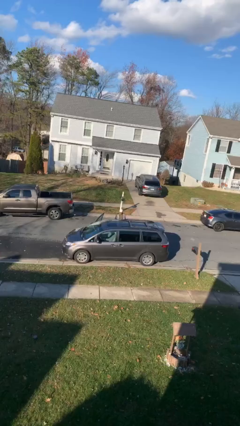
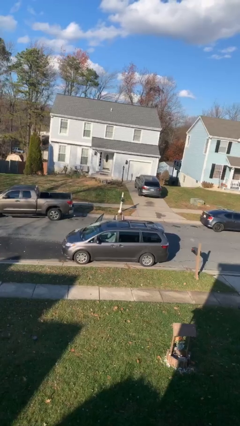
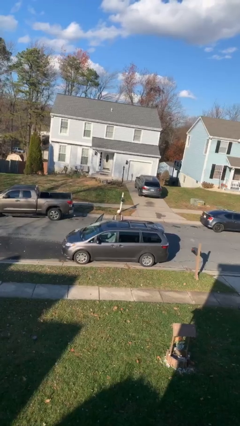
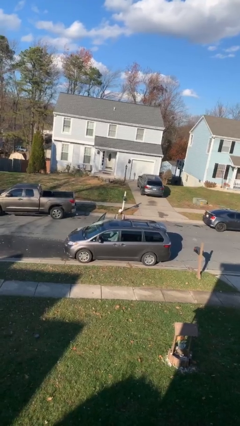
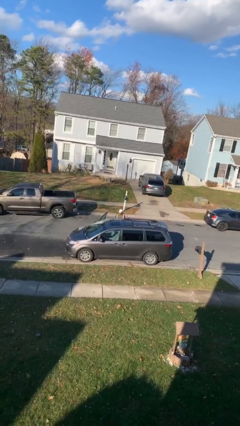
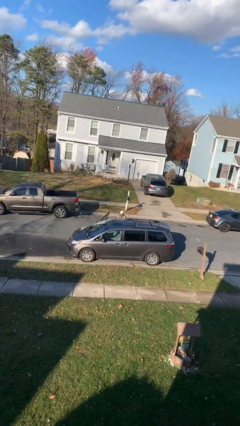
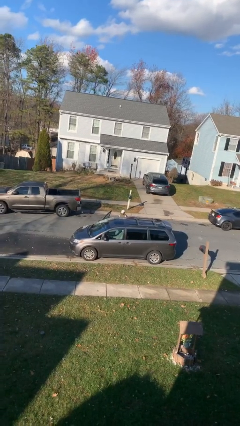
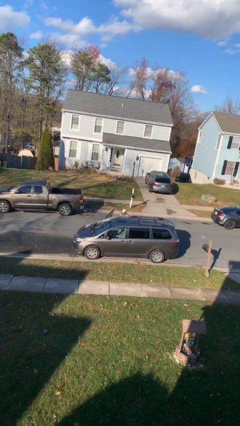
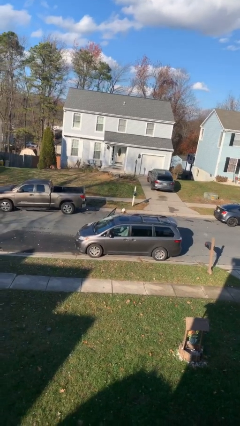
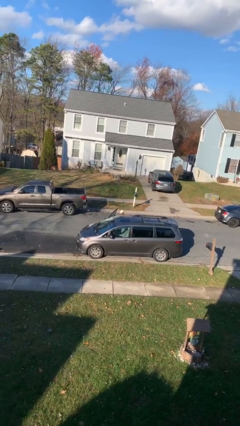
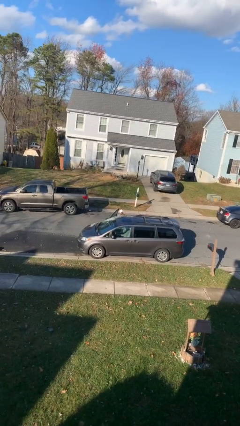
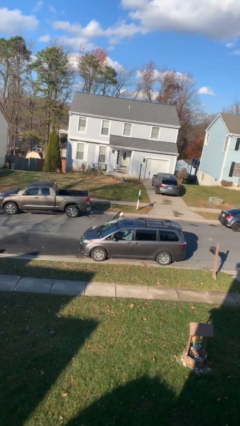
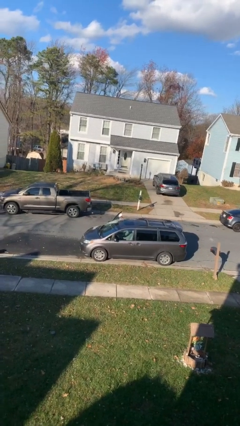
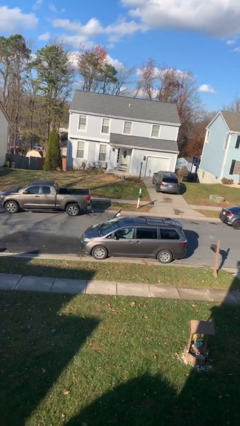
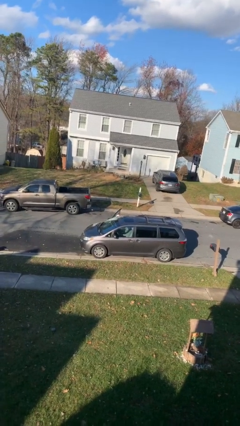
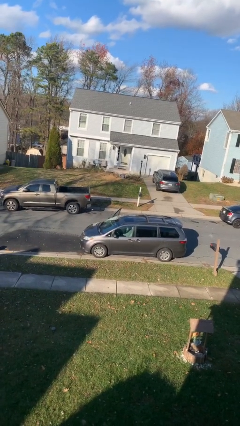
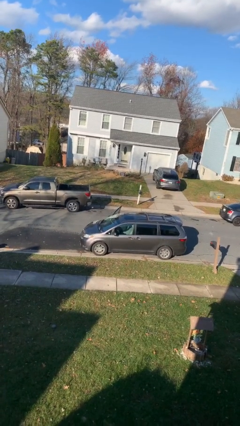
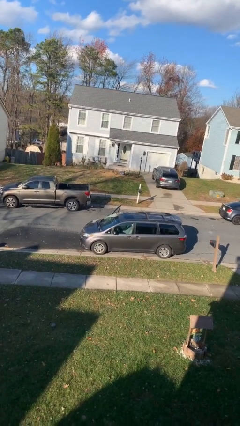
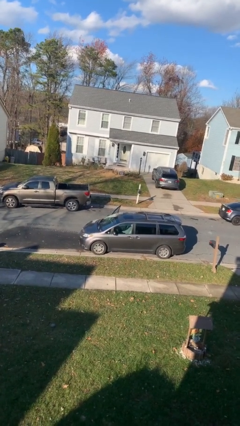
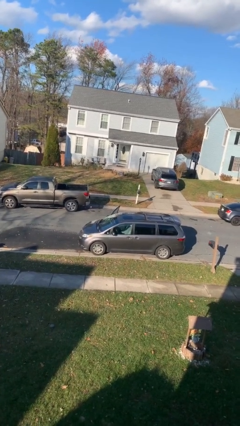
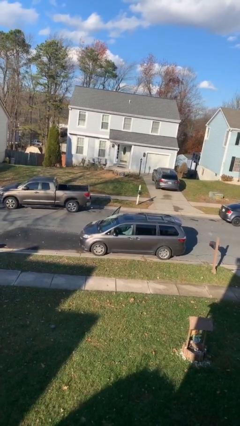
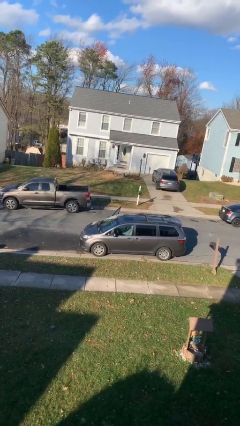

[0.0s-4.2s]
person enters car

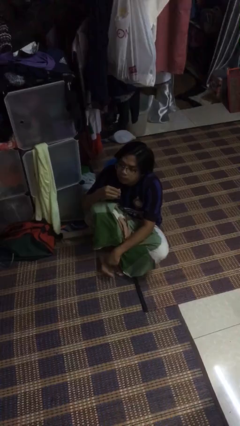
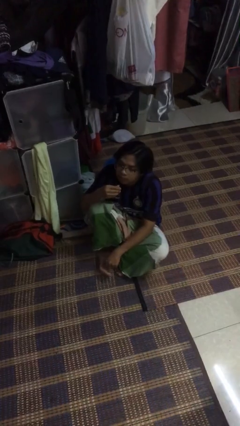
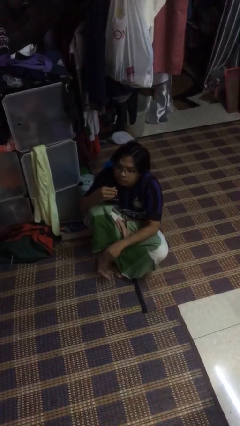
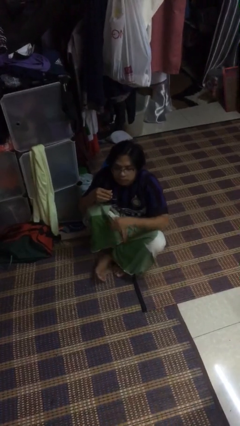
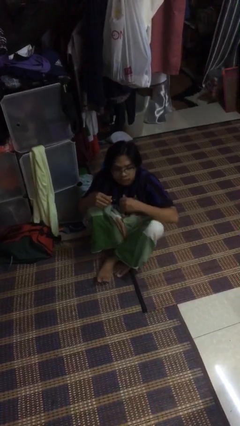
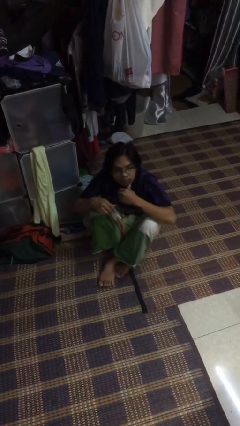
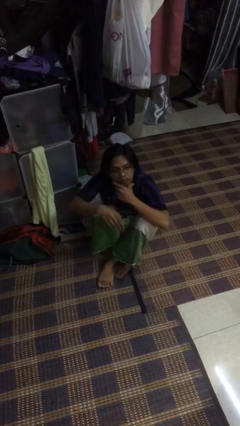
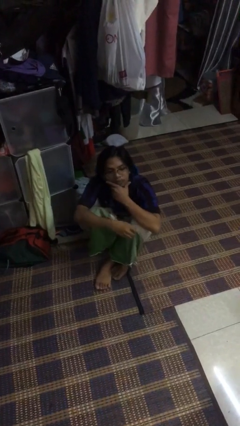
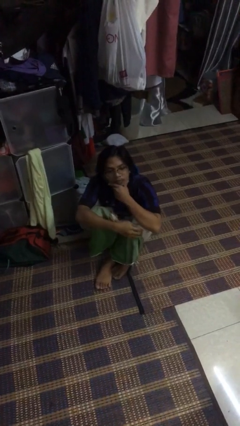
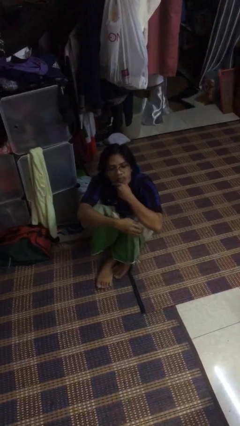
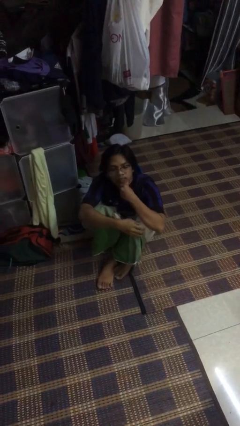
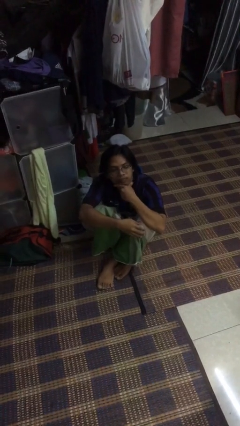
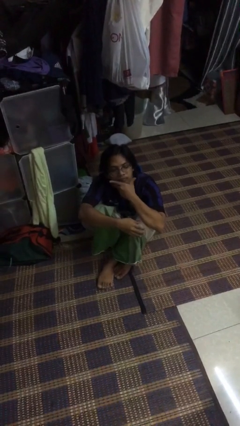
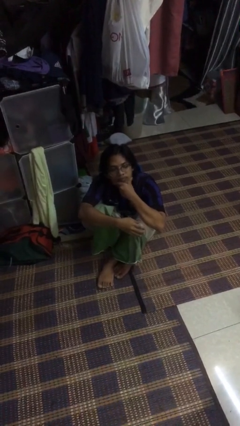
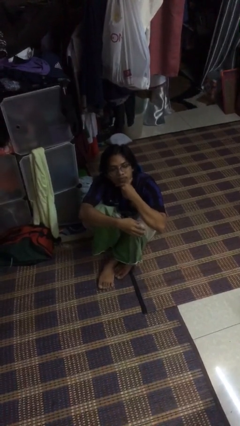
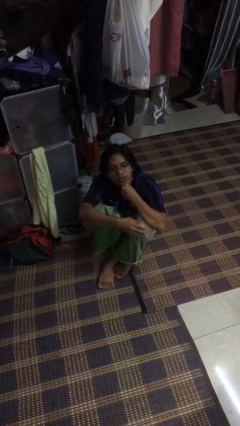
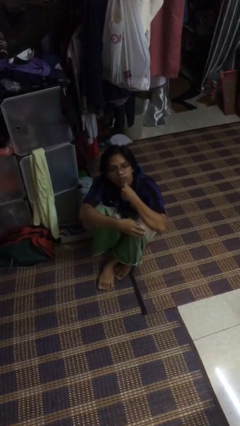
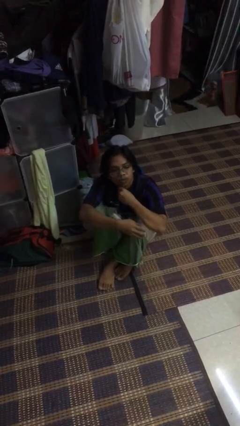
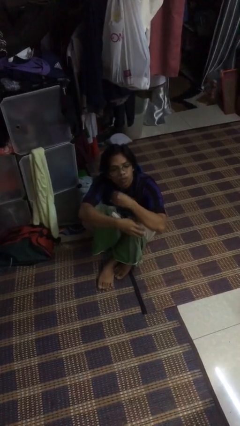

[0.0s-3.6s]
person strokes chin

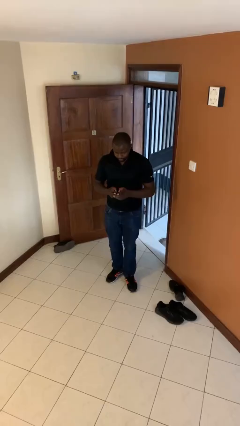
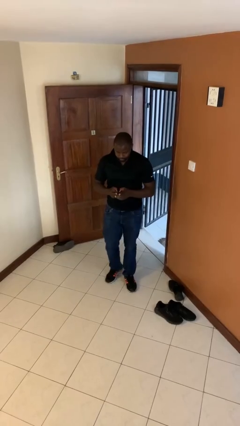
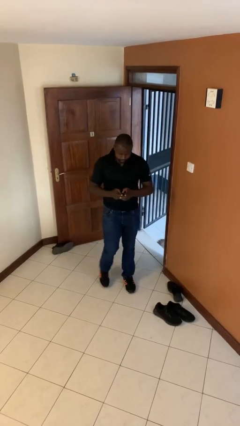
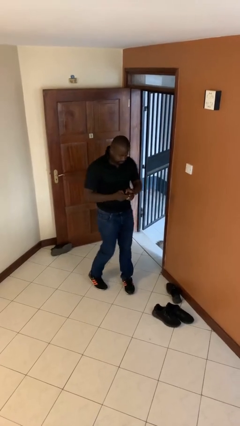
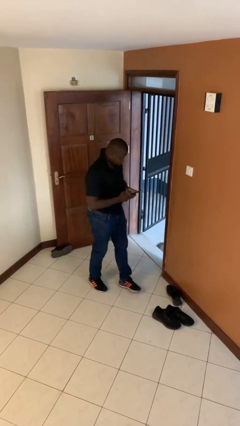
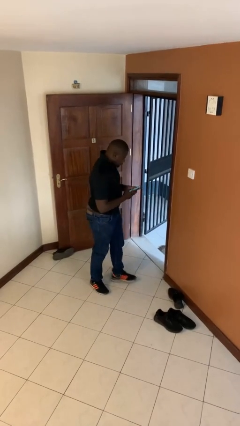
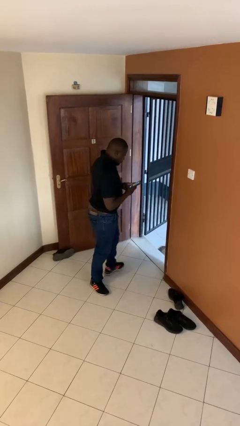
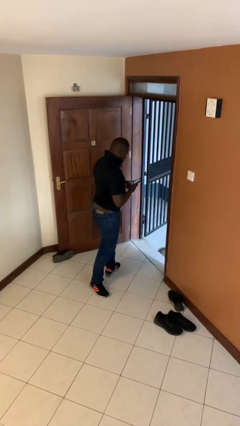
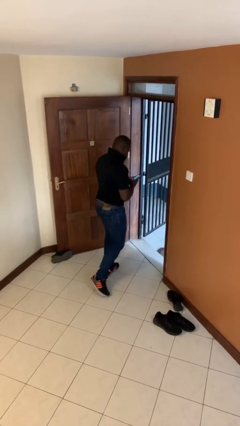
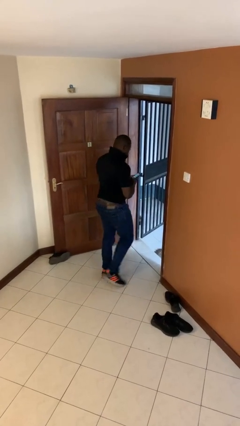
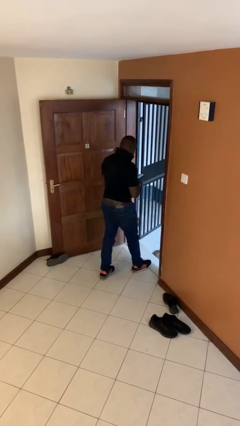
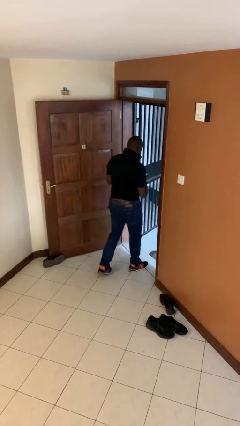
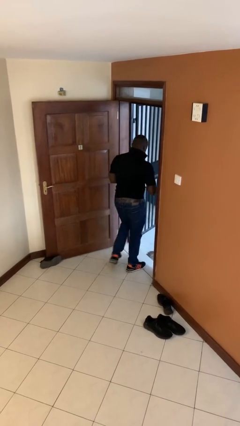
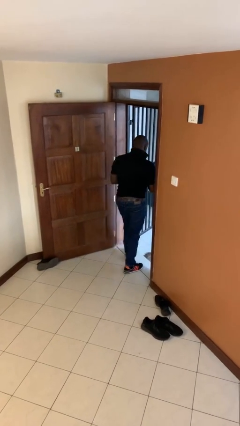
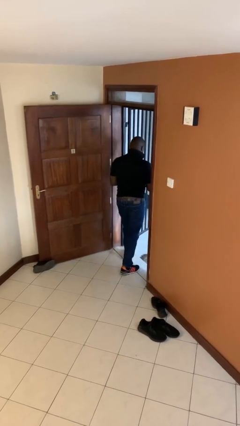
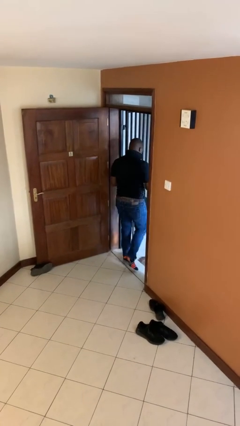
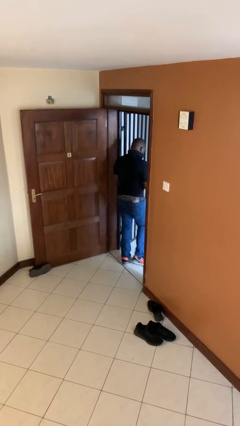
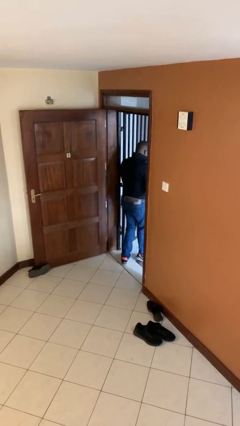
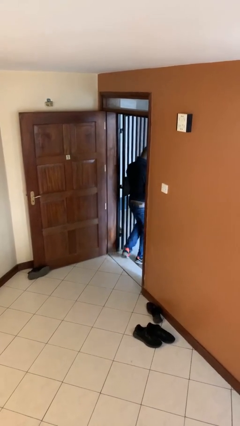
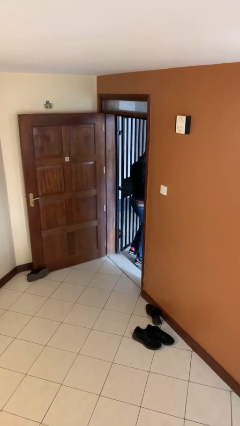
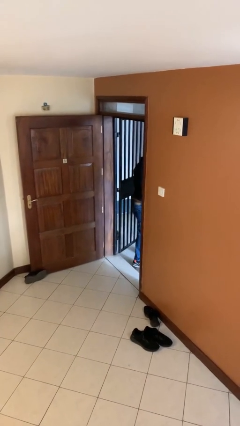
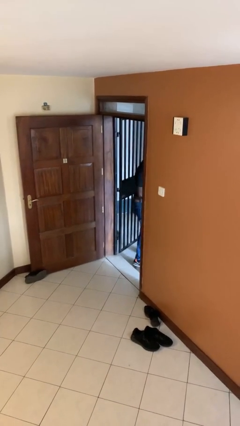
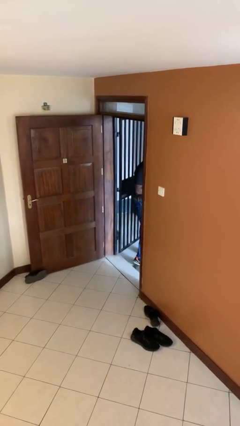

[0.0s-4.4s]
person exits scene through structure

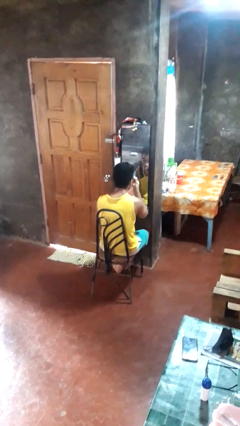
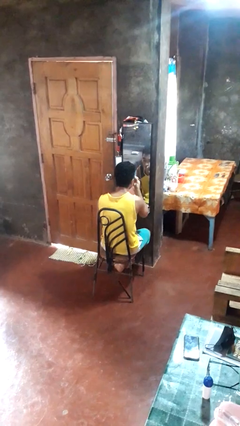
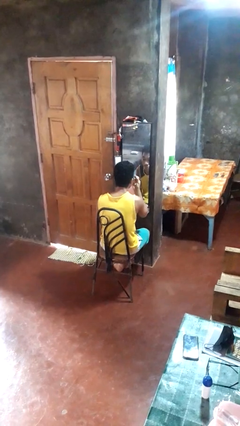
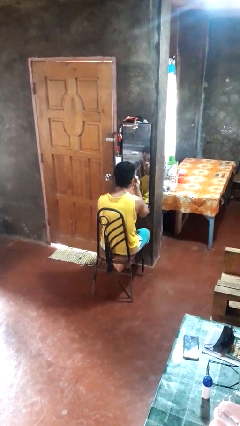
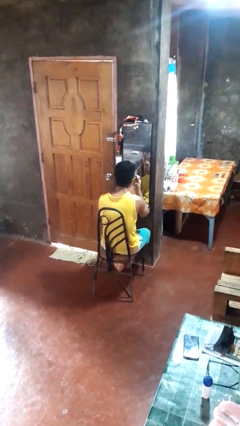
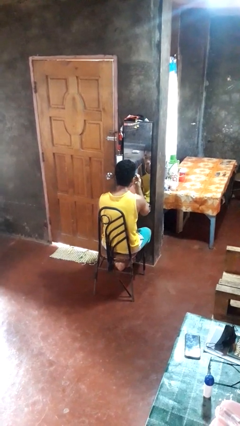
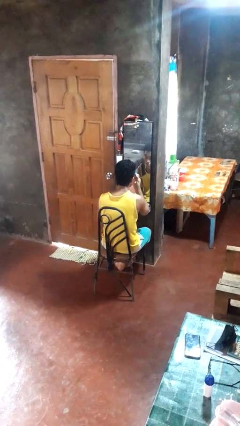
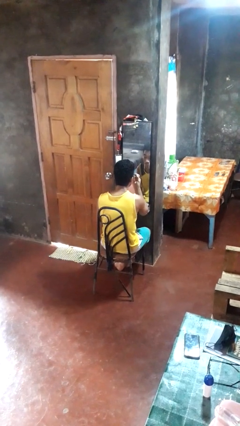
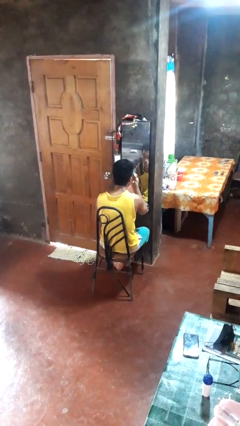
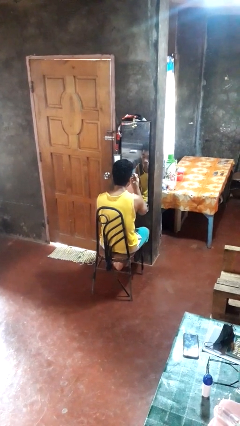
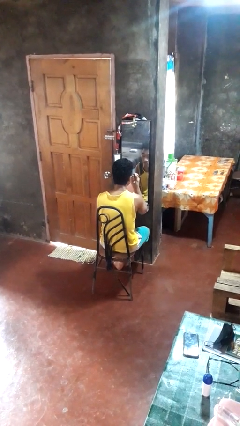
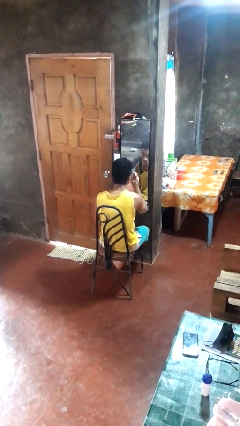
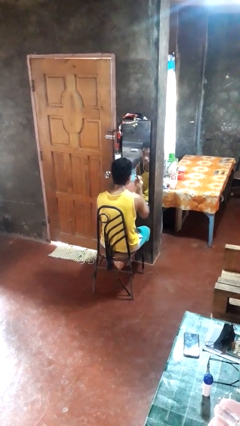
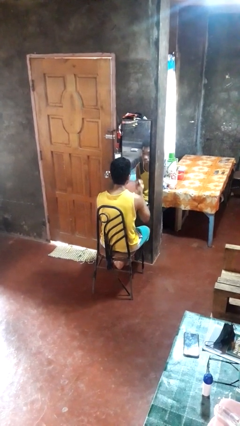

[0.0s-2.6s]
person applies eye makeup

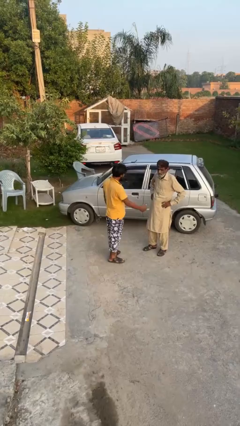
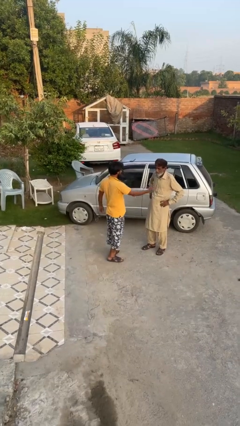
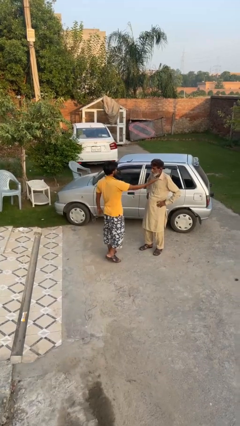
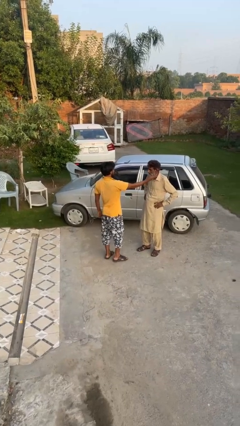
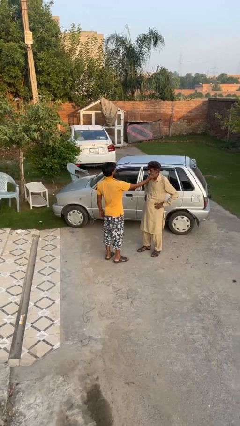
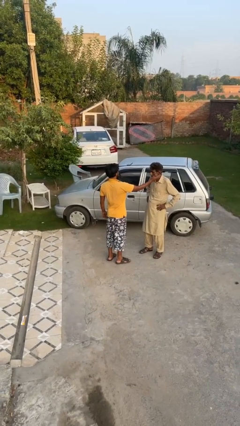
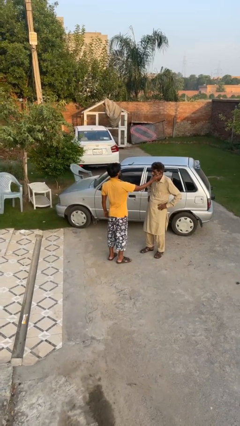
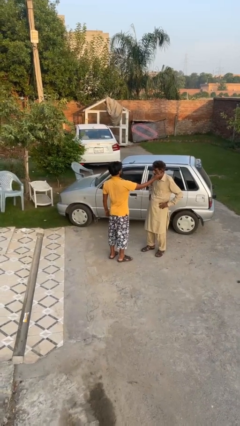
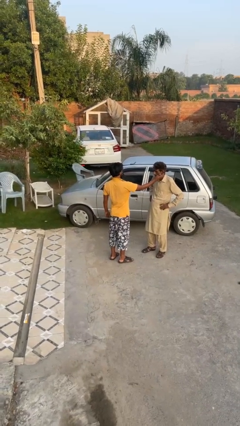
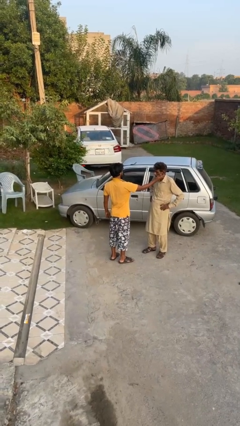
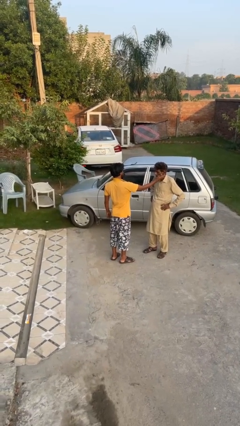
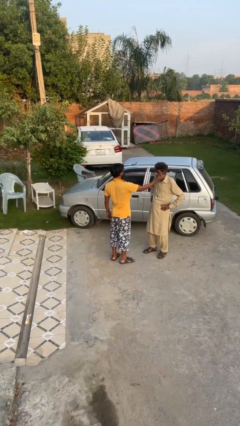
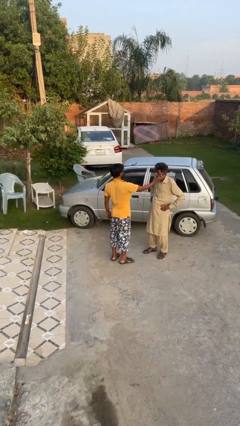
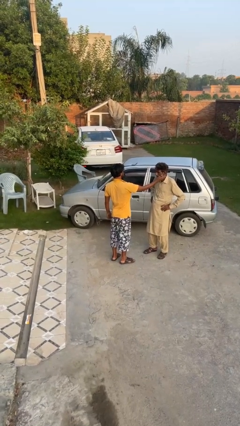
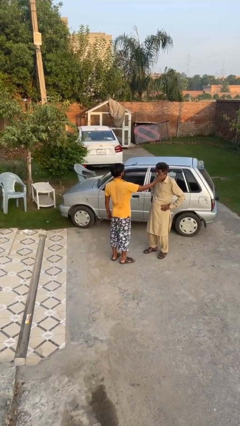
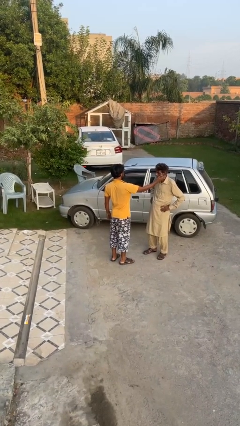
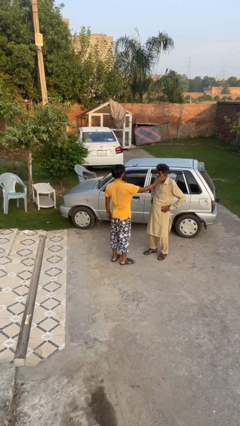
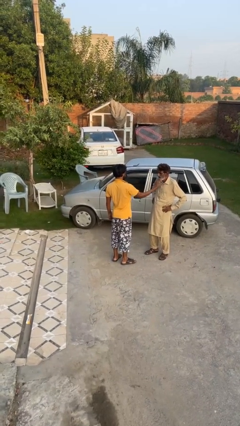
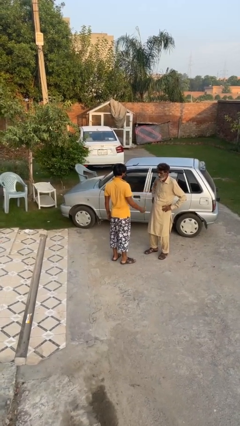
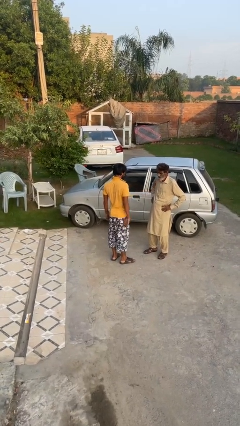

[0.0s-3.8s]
person touches face of person
